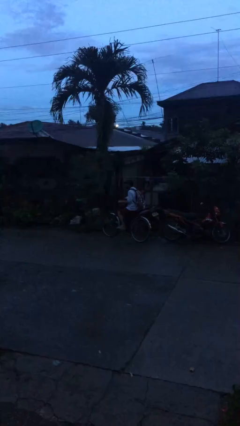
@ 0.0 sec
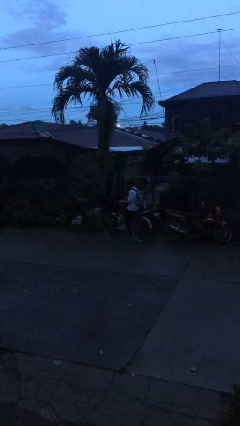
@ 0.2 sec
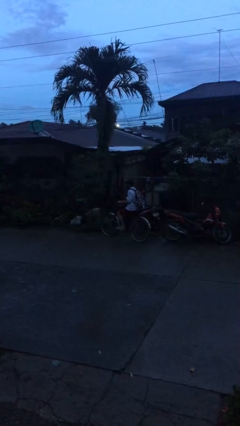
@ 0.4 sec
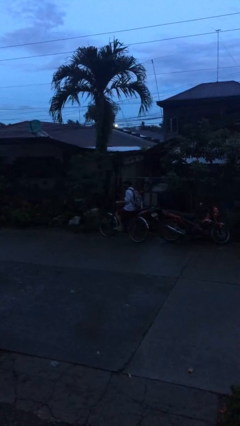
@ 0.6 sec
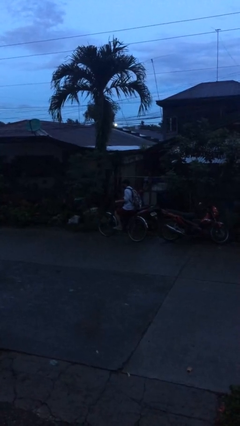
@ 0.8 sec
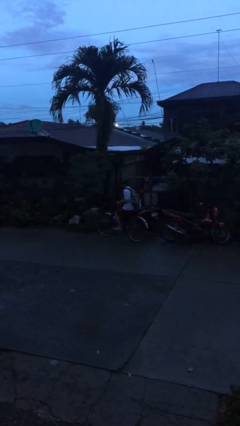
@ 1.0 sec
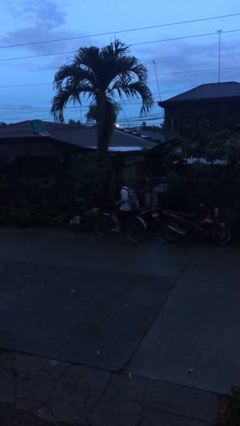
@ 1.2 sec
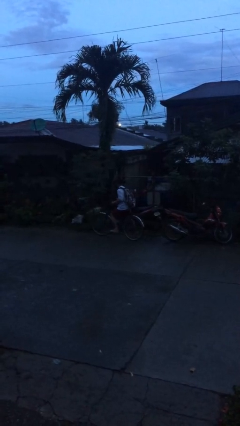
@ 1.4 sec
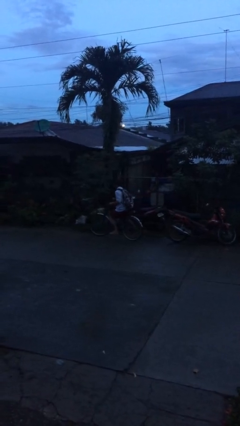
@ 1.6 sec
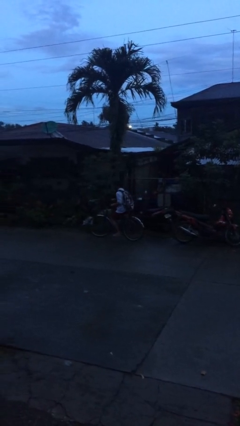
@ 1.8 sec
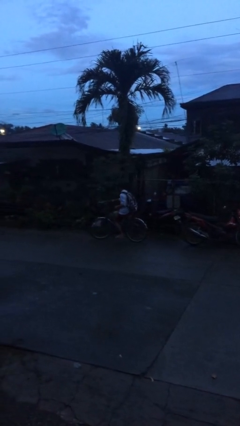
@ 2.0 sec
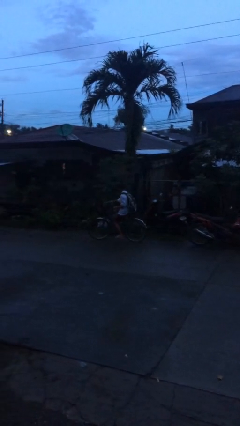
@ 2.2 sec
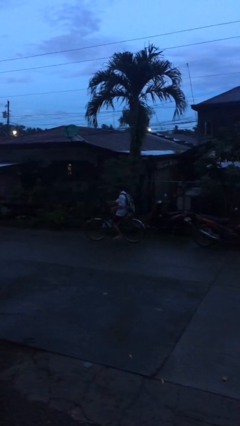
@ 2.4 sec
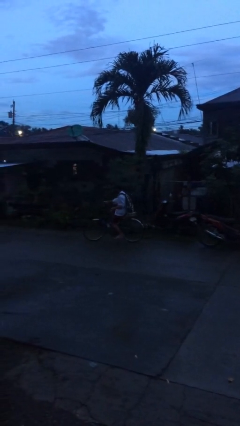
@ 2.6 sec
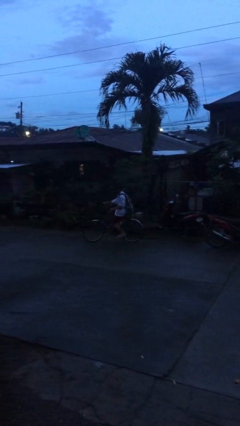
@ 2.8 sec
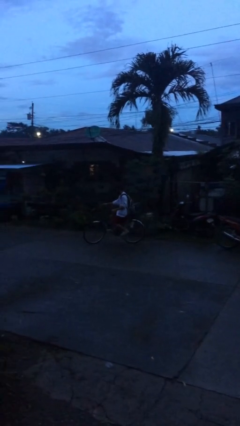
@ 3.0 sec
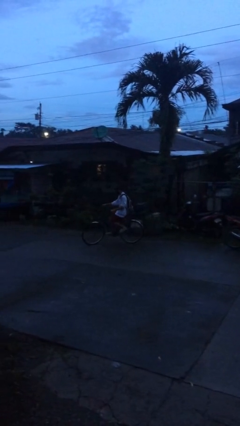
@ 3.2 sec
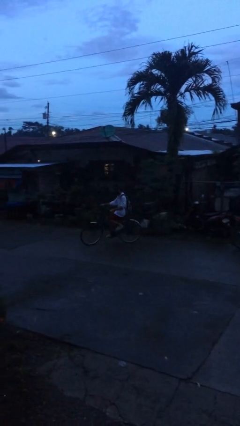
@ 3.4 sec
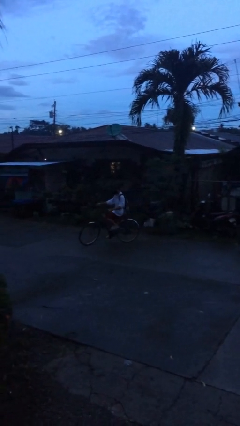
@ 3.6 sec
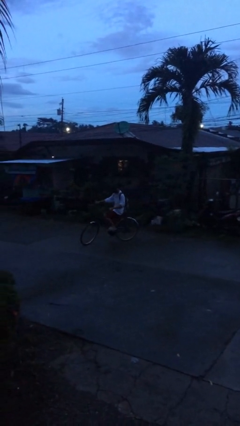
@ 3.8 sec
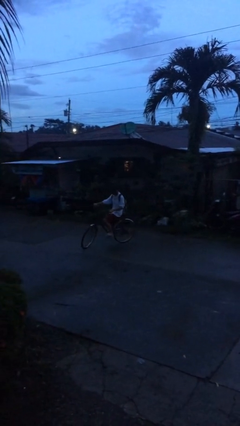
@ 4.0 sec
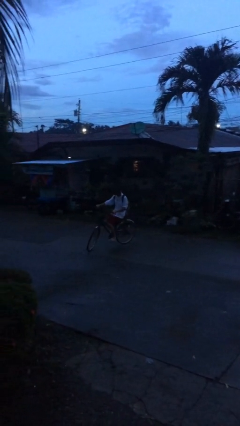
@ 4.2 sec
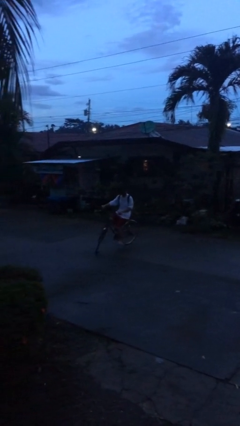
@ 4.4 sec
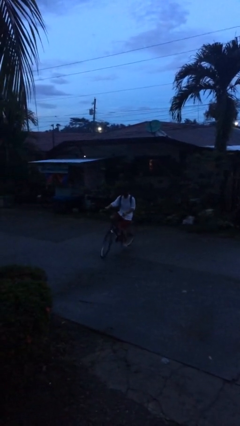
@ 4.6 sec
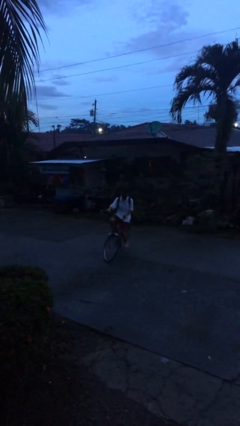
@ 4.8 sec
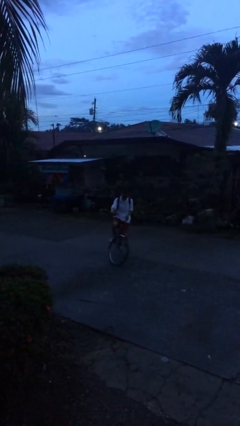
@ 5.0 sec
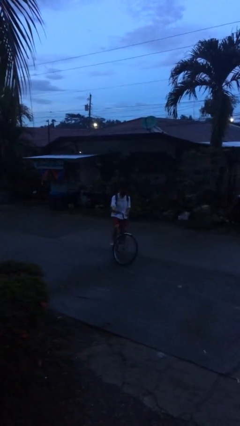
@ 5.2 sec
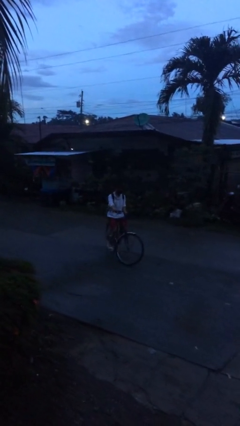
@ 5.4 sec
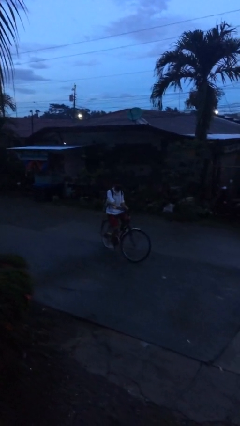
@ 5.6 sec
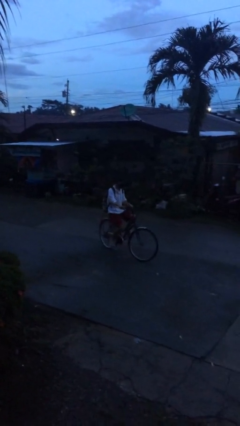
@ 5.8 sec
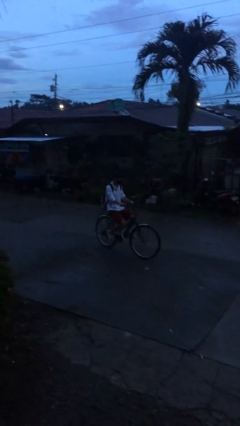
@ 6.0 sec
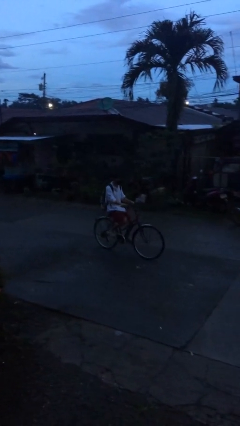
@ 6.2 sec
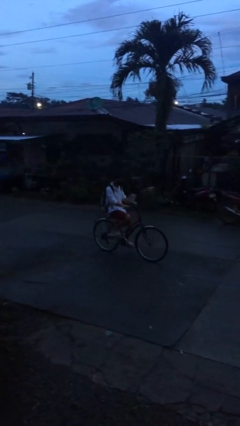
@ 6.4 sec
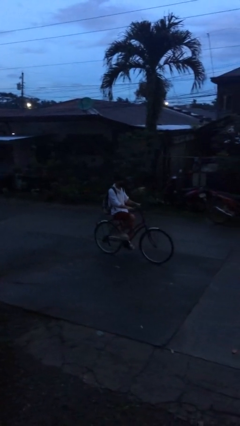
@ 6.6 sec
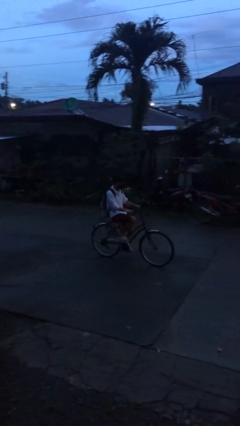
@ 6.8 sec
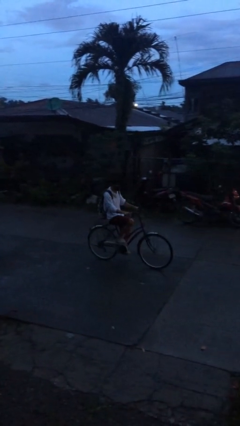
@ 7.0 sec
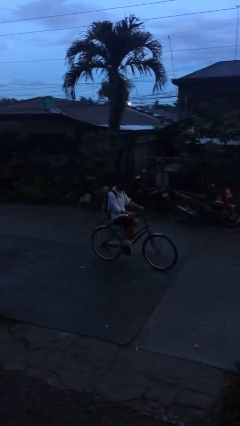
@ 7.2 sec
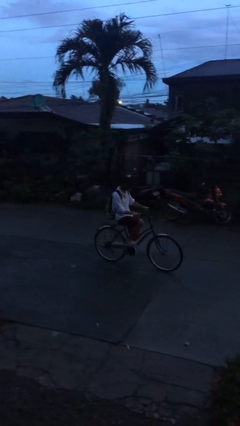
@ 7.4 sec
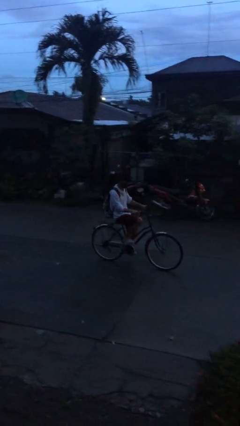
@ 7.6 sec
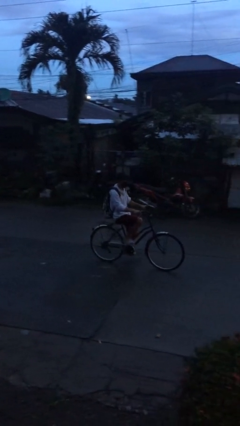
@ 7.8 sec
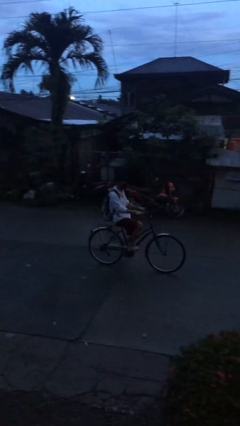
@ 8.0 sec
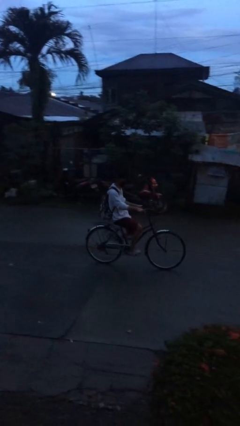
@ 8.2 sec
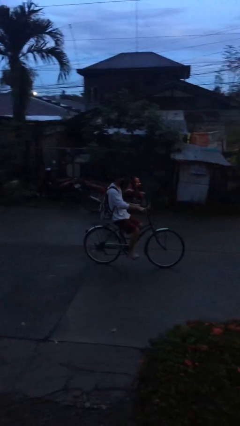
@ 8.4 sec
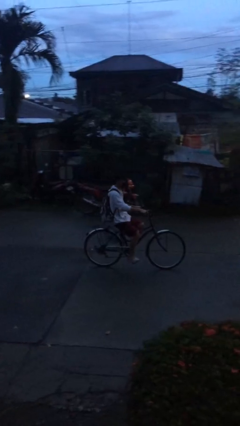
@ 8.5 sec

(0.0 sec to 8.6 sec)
person rides bicycle

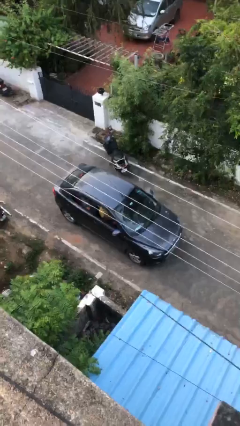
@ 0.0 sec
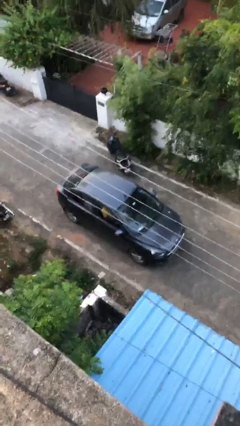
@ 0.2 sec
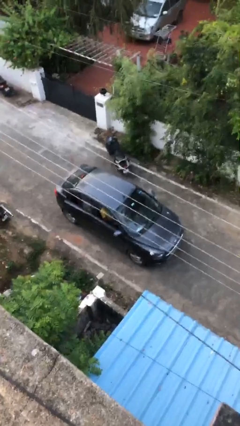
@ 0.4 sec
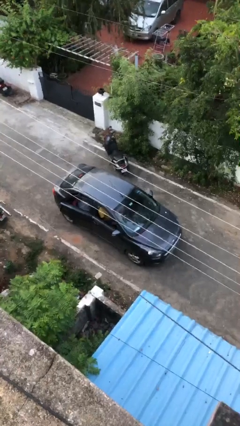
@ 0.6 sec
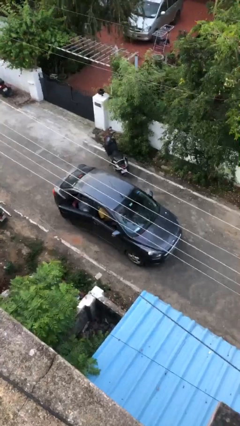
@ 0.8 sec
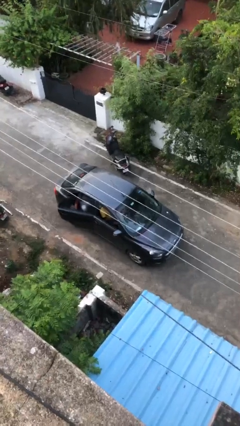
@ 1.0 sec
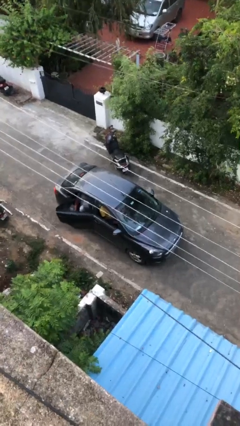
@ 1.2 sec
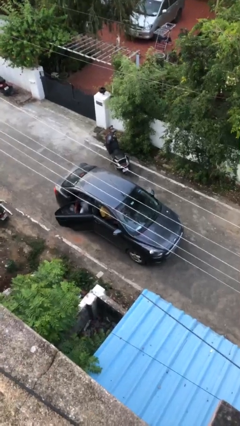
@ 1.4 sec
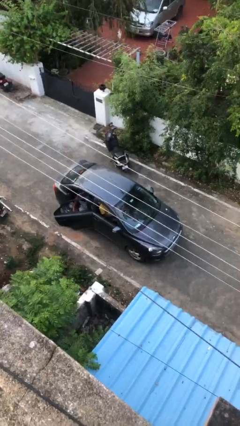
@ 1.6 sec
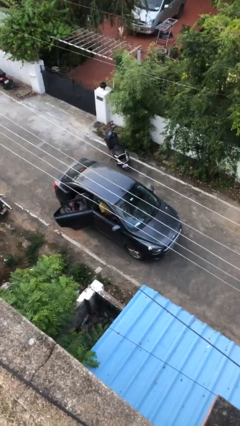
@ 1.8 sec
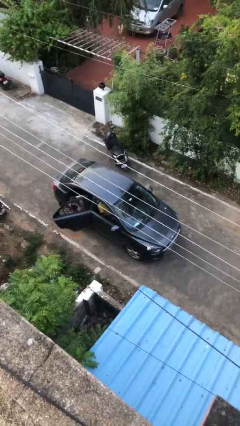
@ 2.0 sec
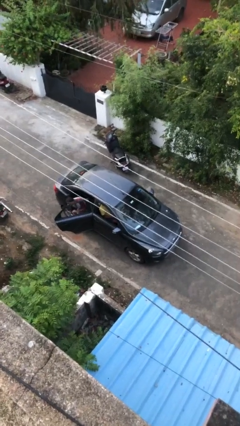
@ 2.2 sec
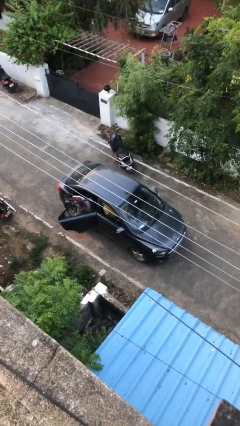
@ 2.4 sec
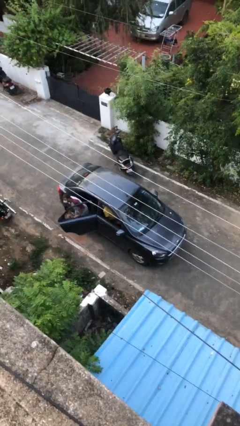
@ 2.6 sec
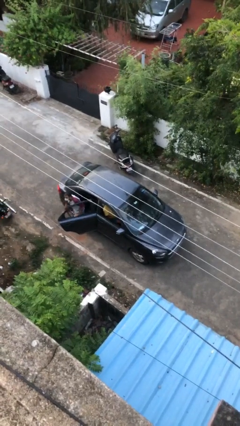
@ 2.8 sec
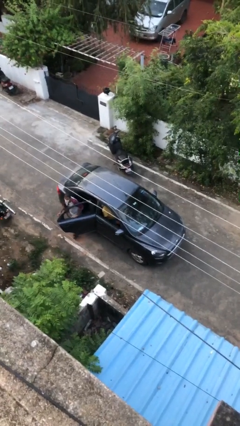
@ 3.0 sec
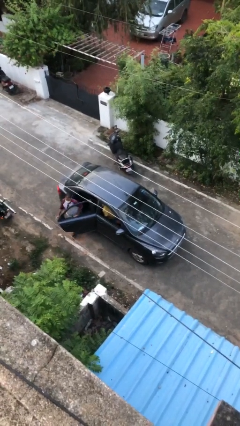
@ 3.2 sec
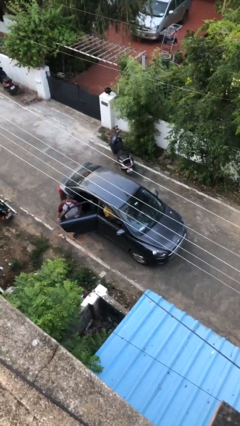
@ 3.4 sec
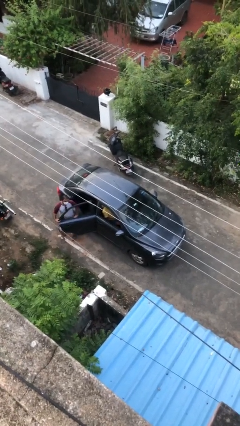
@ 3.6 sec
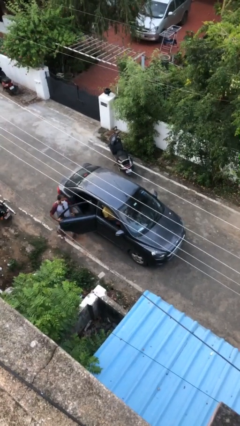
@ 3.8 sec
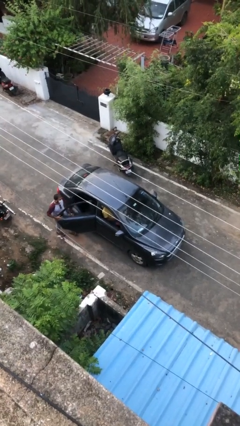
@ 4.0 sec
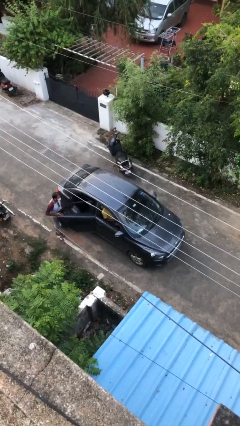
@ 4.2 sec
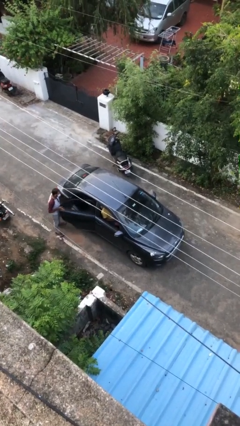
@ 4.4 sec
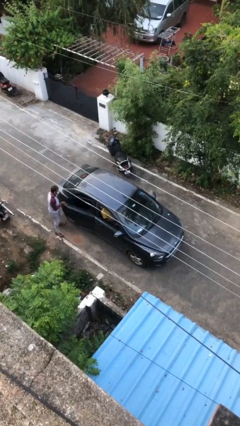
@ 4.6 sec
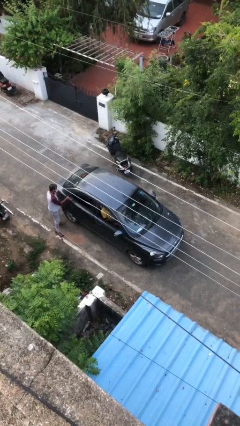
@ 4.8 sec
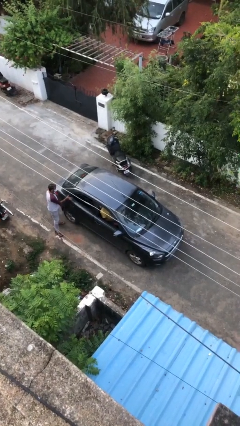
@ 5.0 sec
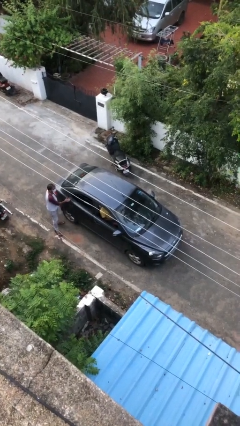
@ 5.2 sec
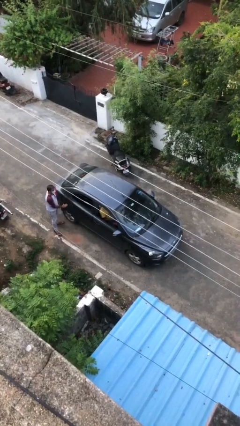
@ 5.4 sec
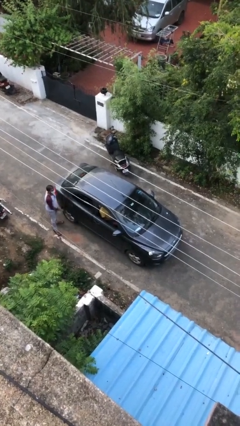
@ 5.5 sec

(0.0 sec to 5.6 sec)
car drops off person

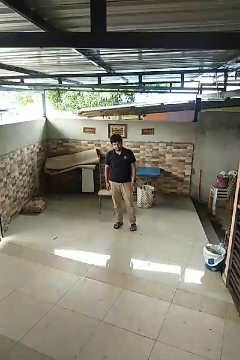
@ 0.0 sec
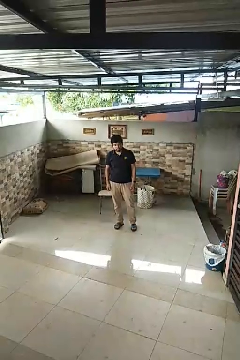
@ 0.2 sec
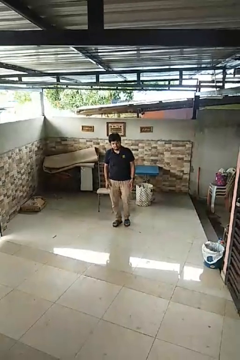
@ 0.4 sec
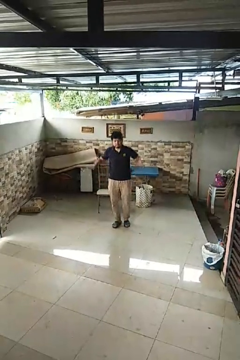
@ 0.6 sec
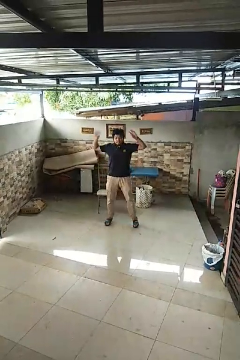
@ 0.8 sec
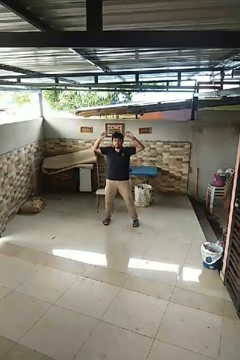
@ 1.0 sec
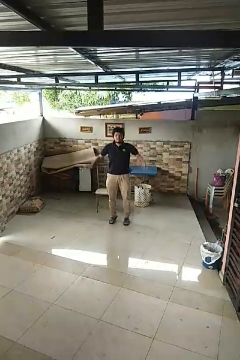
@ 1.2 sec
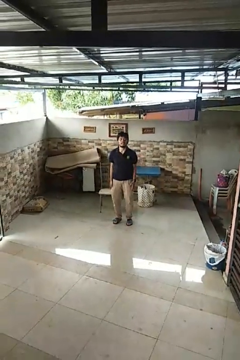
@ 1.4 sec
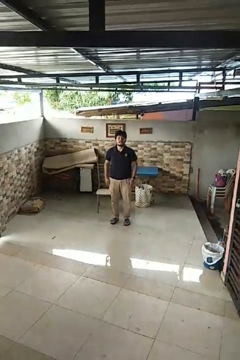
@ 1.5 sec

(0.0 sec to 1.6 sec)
person exercises with jumping jacks

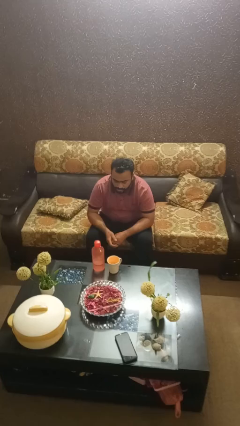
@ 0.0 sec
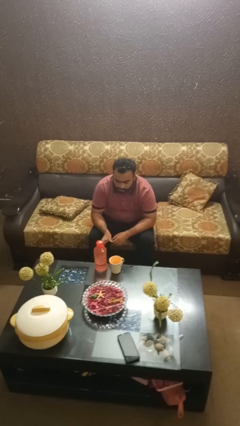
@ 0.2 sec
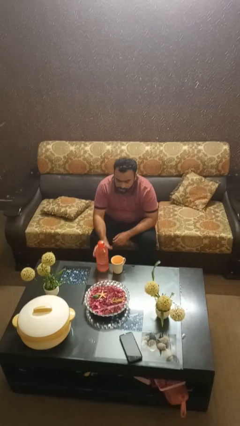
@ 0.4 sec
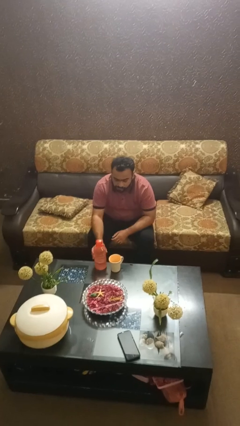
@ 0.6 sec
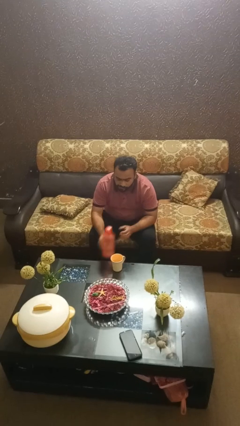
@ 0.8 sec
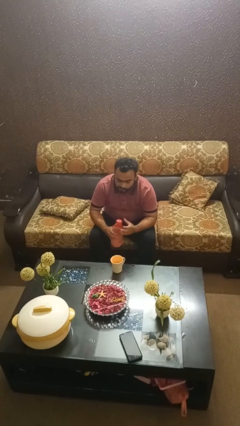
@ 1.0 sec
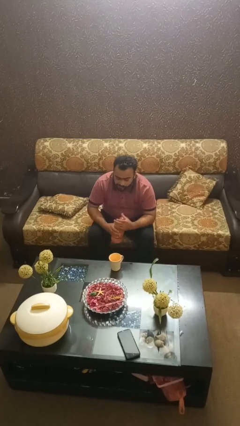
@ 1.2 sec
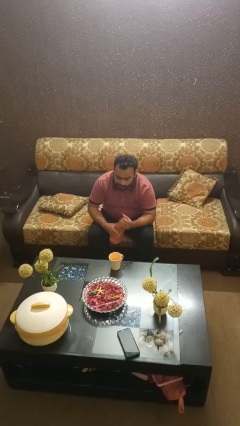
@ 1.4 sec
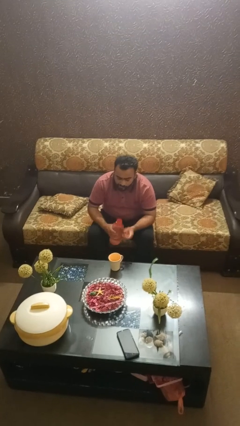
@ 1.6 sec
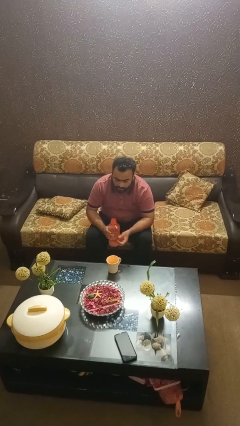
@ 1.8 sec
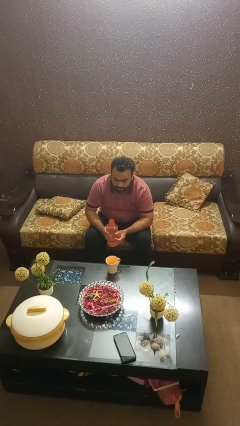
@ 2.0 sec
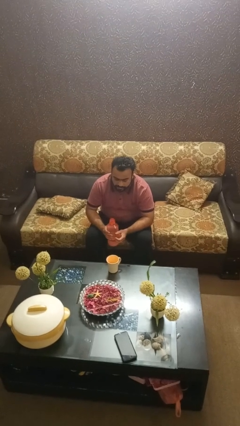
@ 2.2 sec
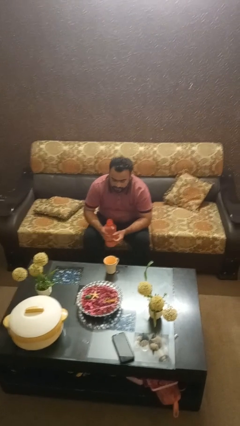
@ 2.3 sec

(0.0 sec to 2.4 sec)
person unscrews lid from bottle
